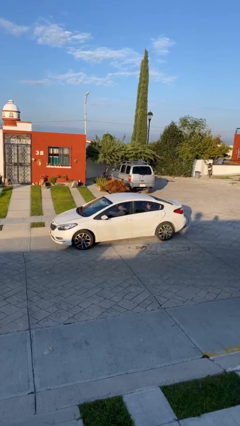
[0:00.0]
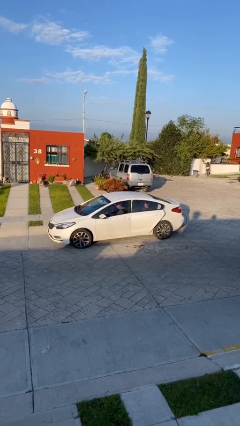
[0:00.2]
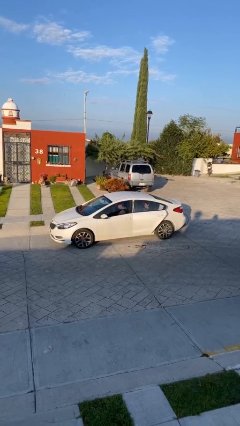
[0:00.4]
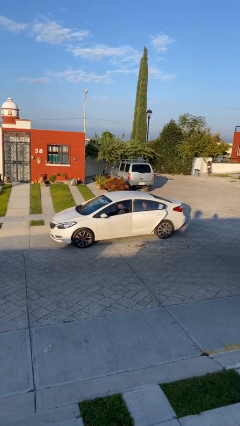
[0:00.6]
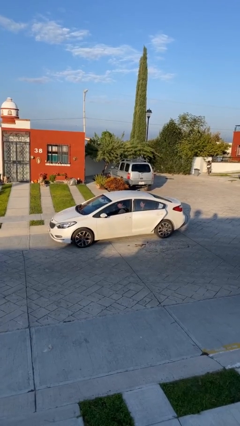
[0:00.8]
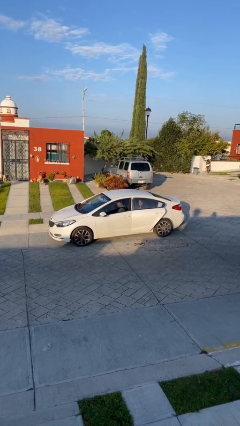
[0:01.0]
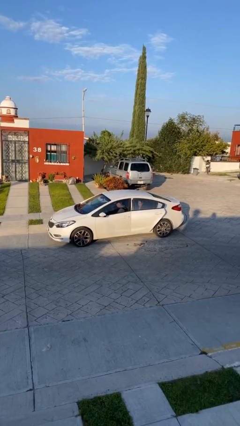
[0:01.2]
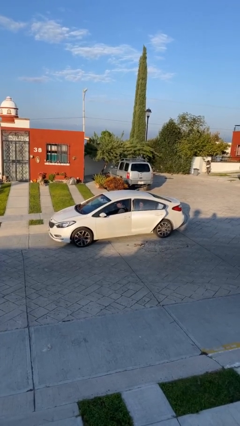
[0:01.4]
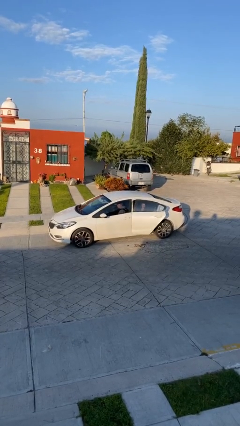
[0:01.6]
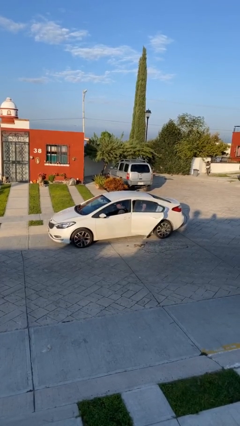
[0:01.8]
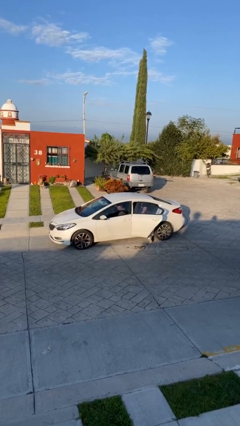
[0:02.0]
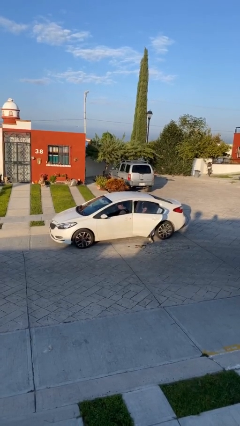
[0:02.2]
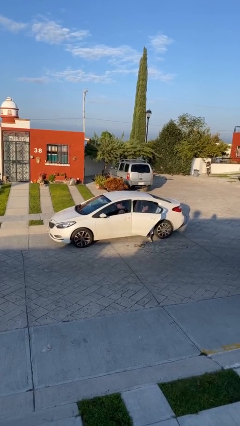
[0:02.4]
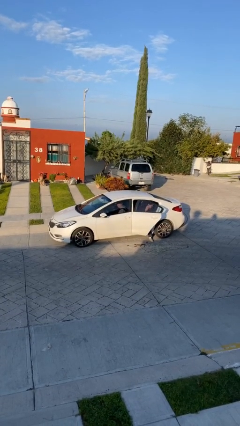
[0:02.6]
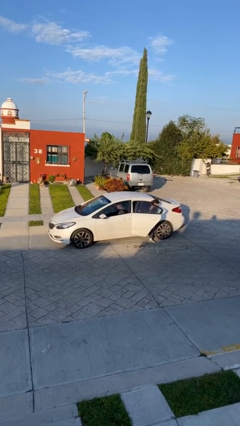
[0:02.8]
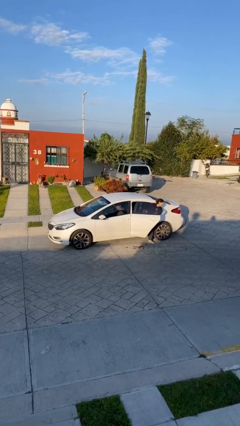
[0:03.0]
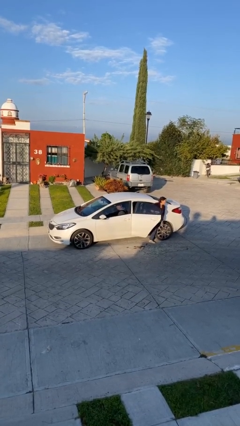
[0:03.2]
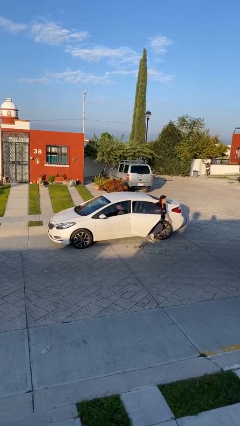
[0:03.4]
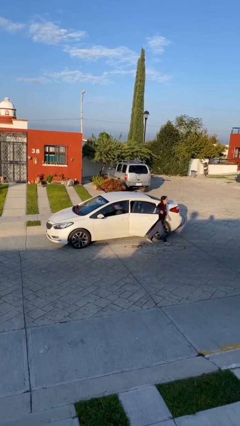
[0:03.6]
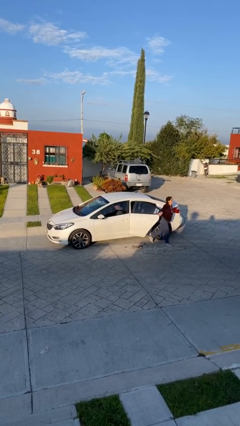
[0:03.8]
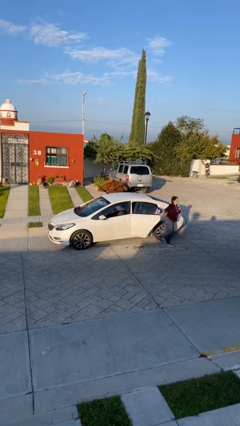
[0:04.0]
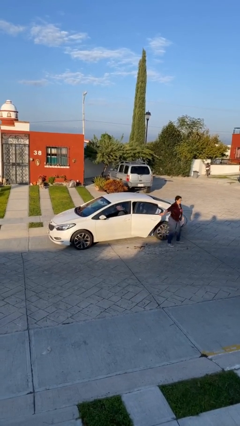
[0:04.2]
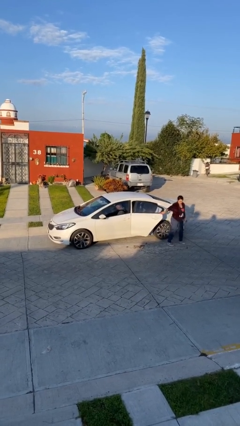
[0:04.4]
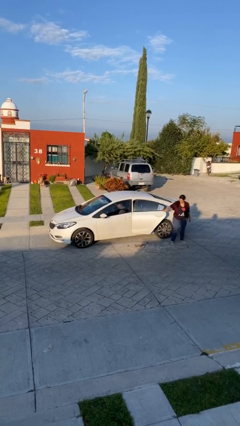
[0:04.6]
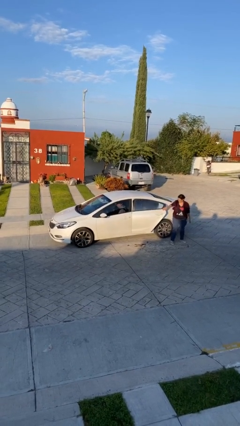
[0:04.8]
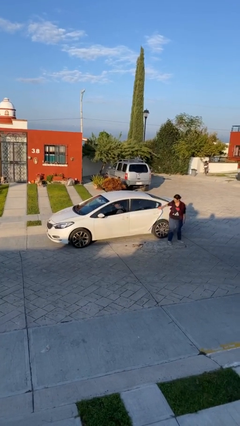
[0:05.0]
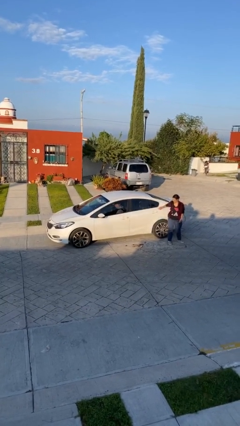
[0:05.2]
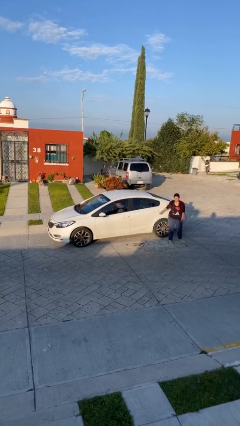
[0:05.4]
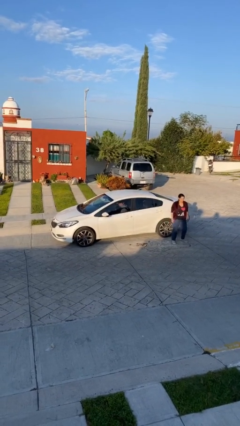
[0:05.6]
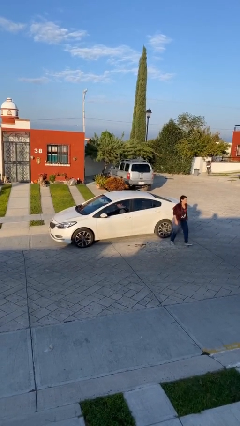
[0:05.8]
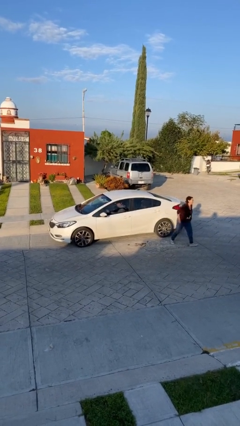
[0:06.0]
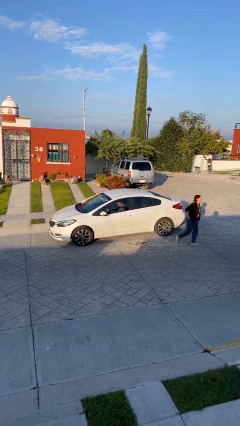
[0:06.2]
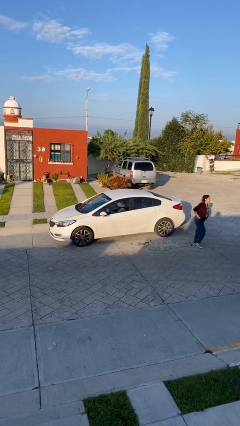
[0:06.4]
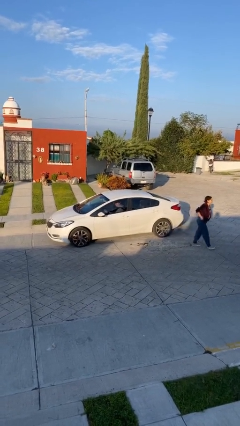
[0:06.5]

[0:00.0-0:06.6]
car drops off person

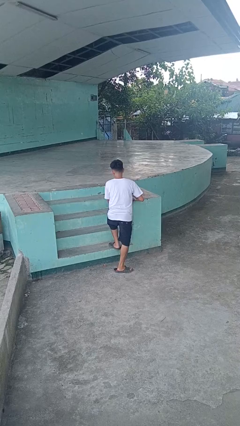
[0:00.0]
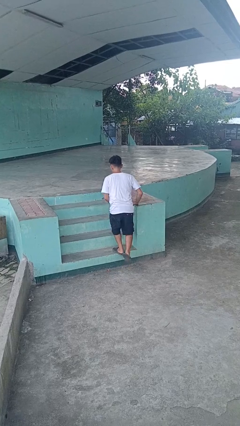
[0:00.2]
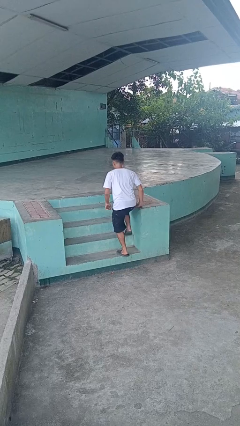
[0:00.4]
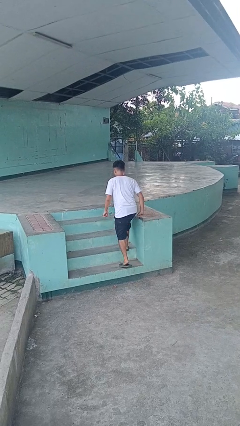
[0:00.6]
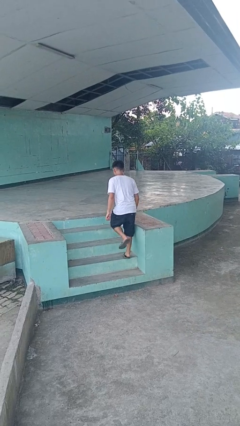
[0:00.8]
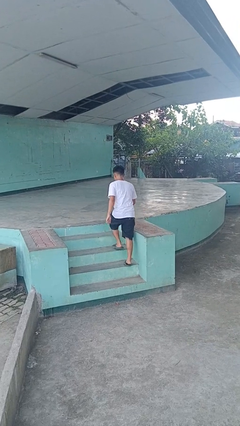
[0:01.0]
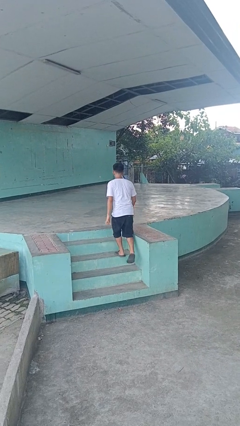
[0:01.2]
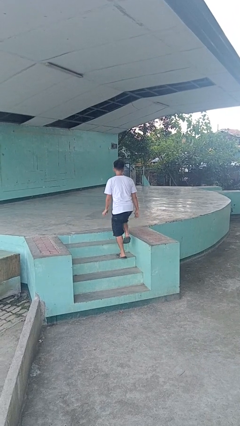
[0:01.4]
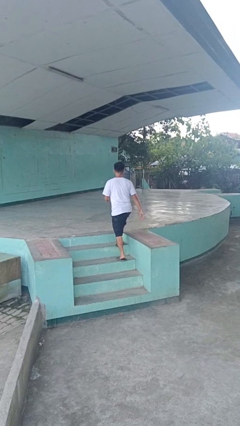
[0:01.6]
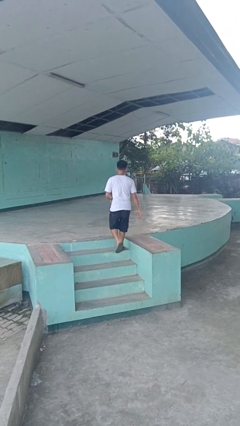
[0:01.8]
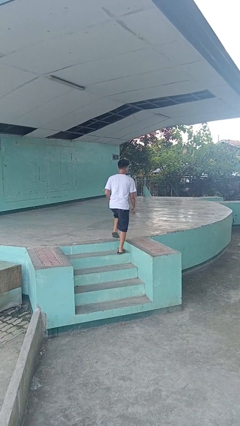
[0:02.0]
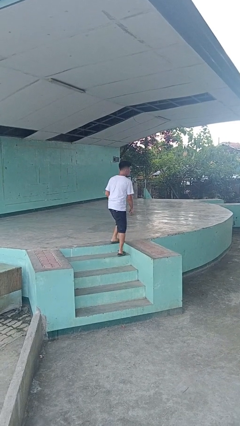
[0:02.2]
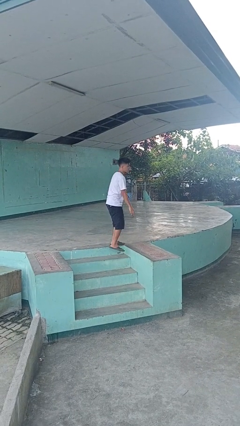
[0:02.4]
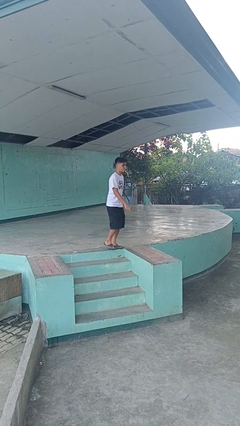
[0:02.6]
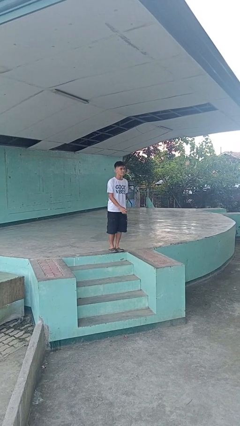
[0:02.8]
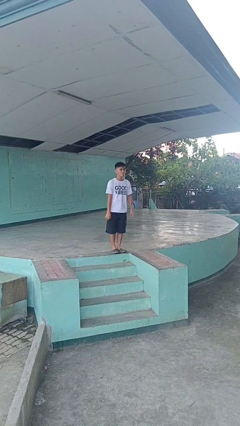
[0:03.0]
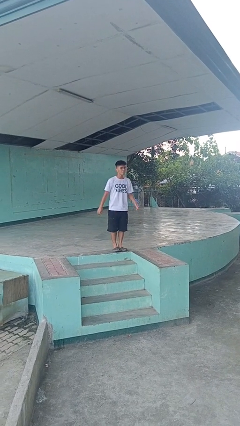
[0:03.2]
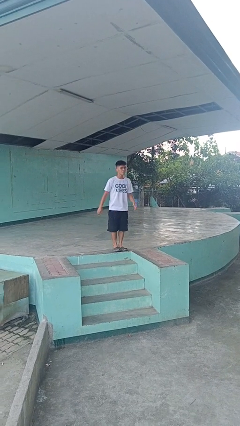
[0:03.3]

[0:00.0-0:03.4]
person climbs up stairs

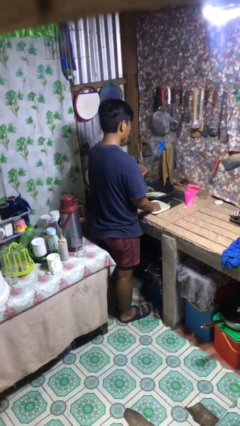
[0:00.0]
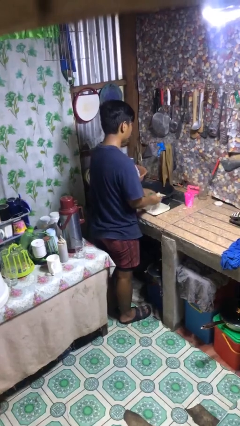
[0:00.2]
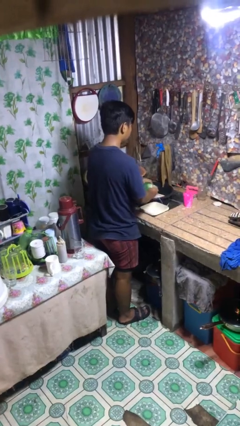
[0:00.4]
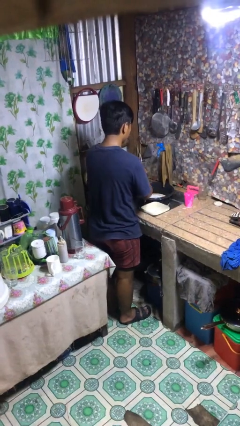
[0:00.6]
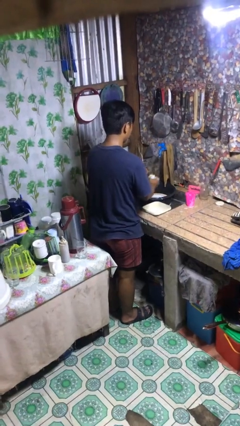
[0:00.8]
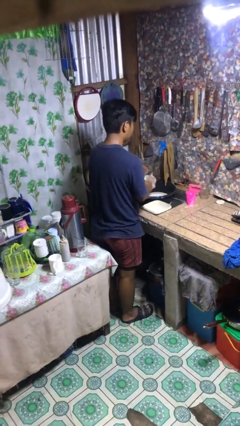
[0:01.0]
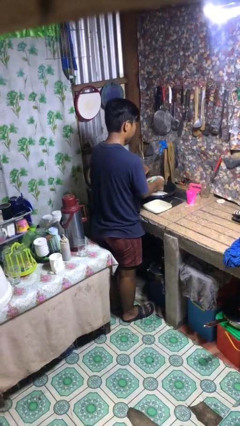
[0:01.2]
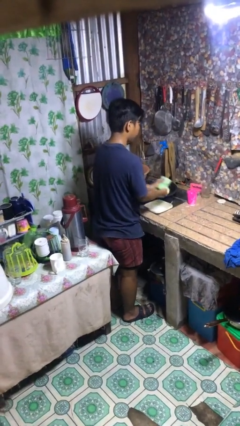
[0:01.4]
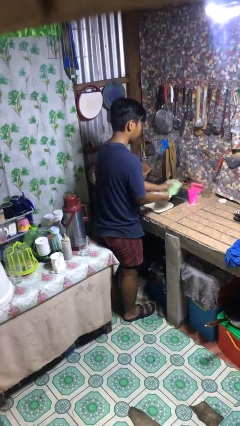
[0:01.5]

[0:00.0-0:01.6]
person washes dish

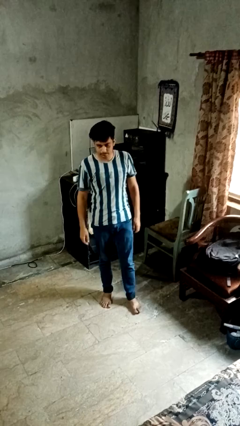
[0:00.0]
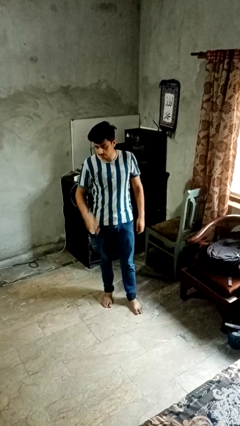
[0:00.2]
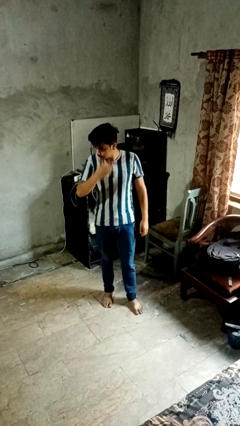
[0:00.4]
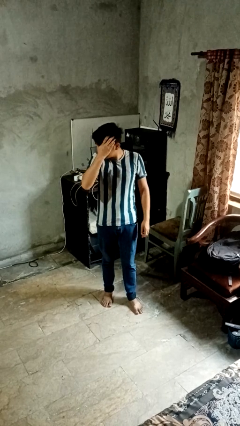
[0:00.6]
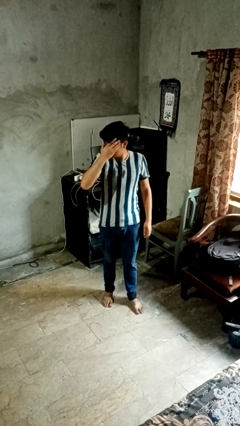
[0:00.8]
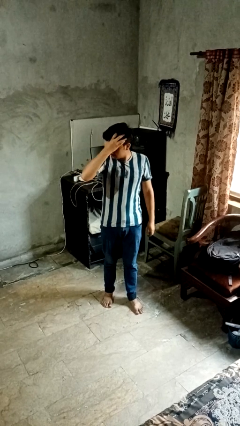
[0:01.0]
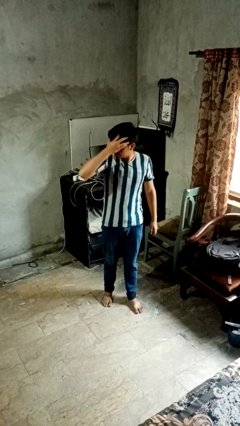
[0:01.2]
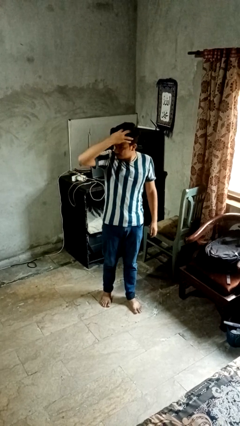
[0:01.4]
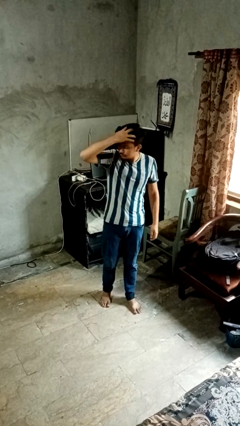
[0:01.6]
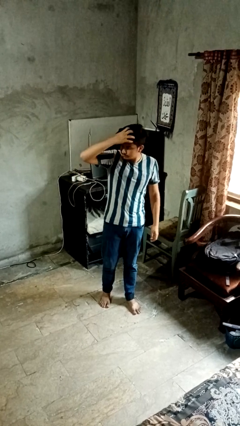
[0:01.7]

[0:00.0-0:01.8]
person scratches face

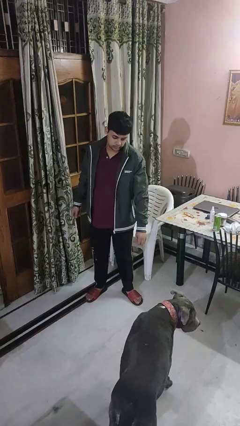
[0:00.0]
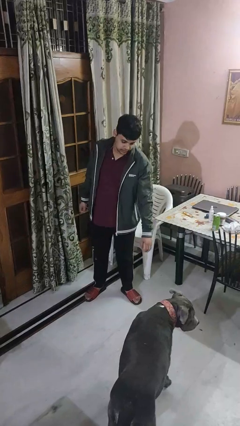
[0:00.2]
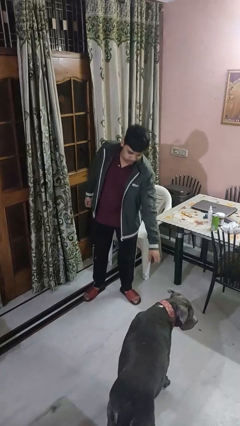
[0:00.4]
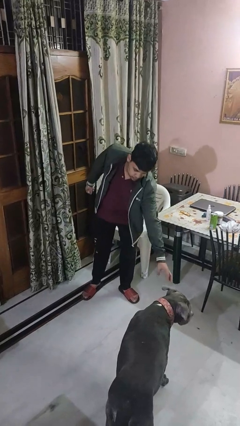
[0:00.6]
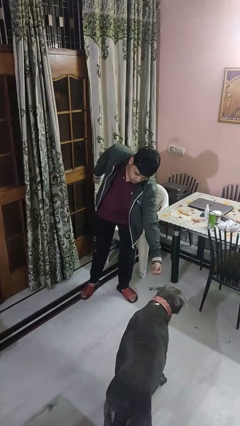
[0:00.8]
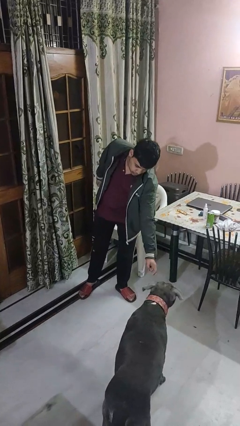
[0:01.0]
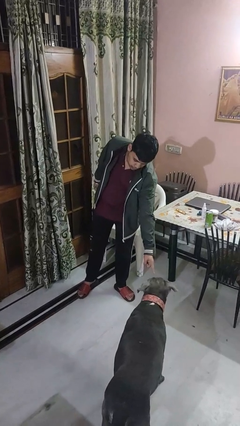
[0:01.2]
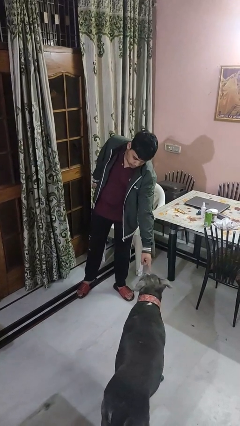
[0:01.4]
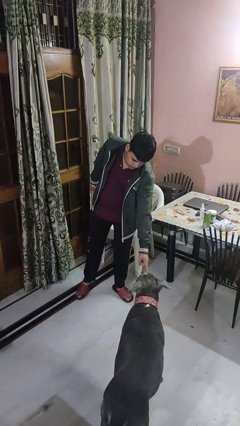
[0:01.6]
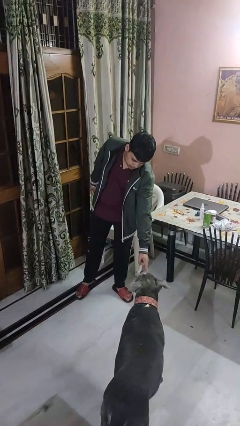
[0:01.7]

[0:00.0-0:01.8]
person points to dog

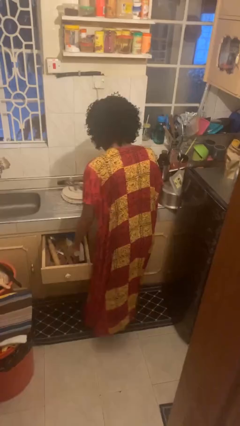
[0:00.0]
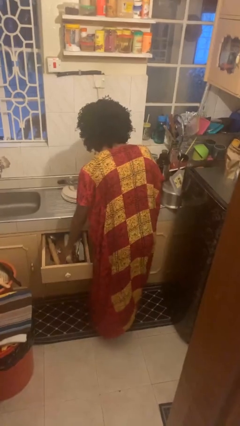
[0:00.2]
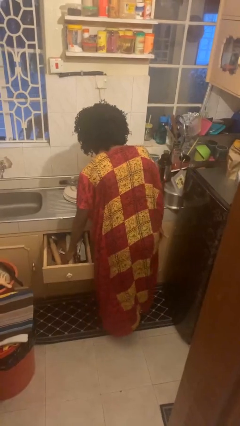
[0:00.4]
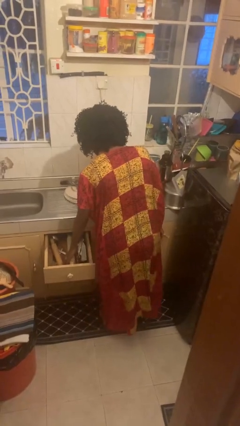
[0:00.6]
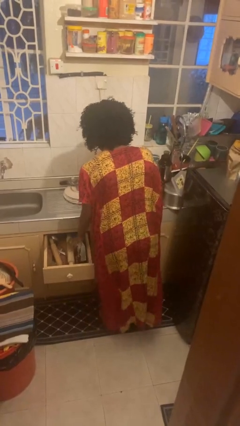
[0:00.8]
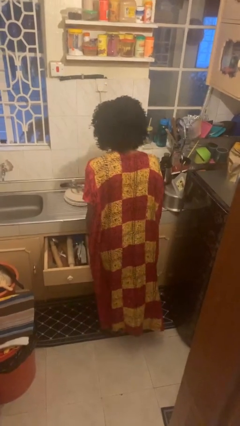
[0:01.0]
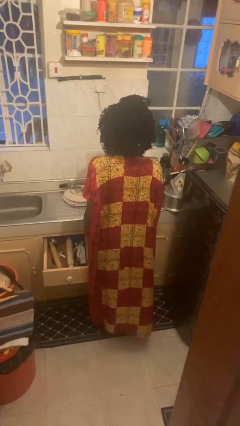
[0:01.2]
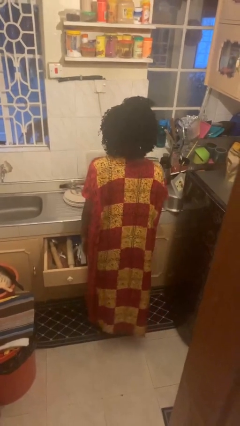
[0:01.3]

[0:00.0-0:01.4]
person puts object into kitchen drawer

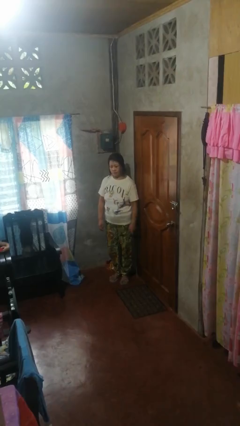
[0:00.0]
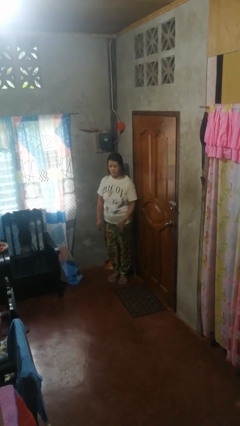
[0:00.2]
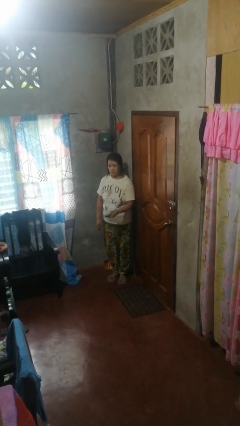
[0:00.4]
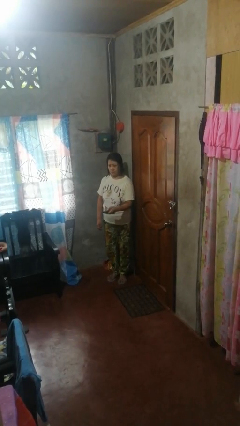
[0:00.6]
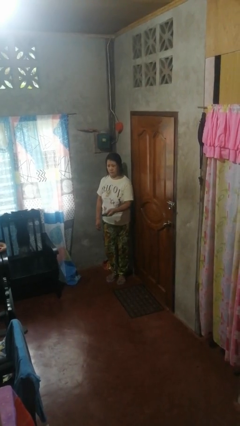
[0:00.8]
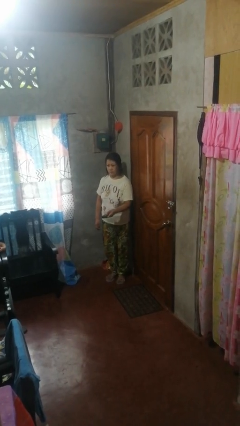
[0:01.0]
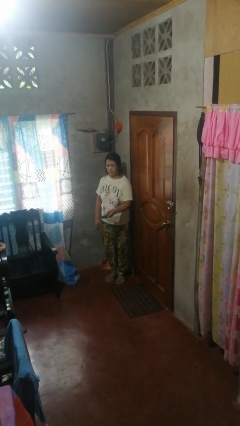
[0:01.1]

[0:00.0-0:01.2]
person uses television remote
